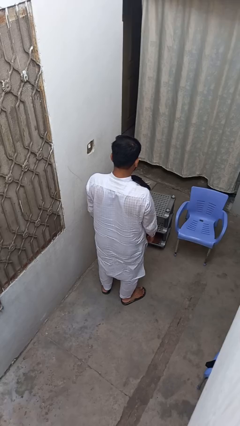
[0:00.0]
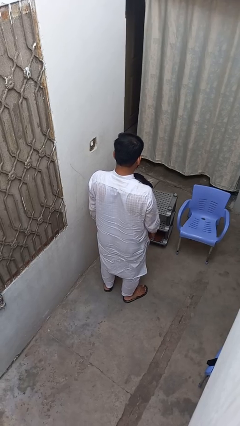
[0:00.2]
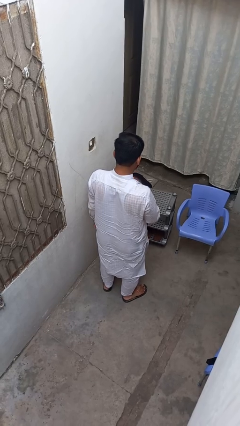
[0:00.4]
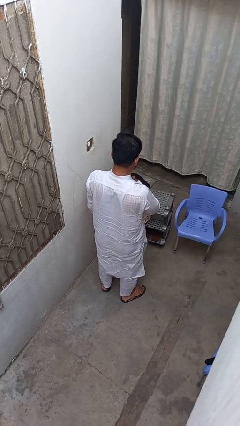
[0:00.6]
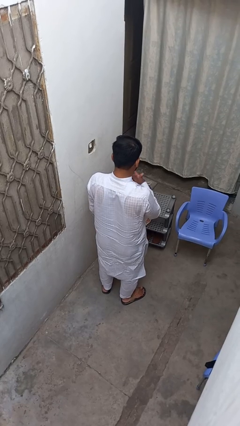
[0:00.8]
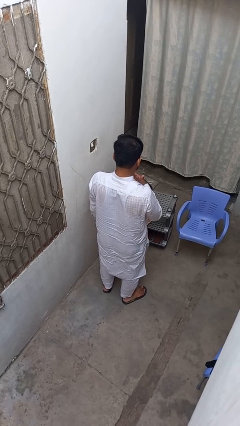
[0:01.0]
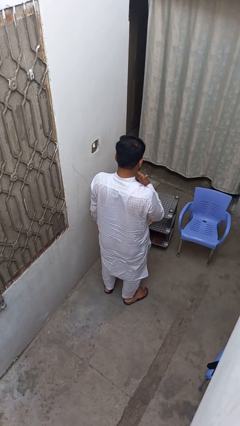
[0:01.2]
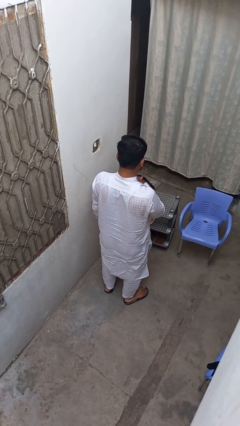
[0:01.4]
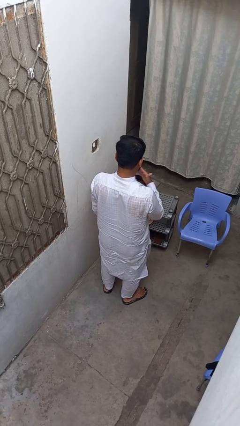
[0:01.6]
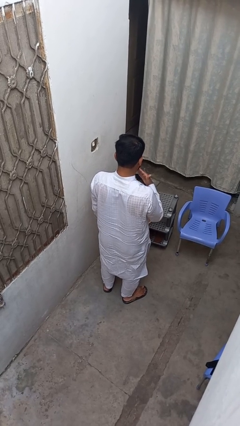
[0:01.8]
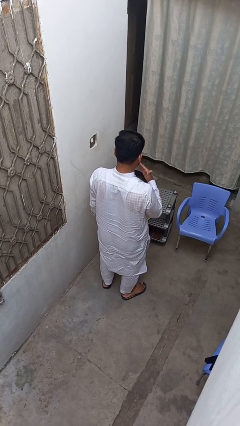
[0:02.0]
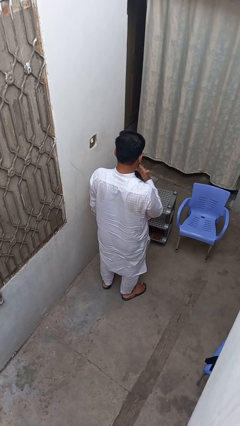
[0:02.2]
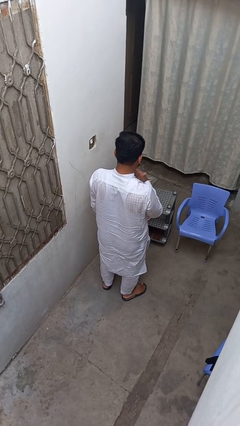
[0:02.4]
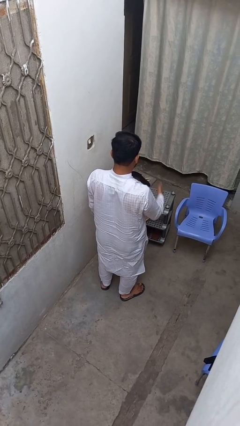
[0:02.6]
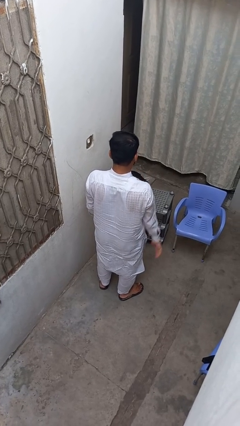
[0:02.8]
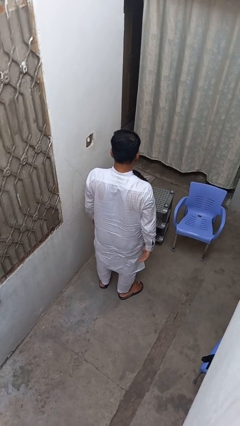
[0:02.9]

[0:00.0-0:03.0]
person drums on chest

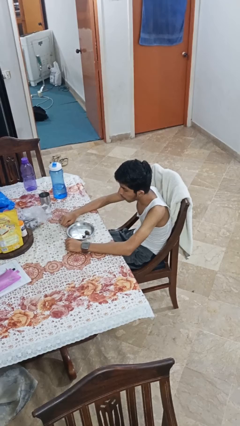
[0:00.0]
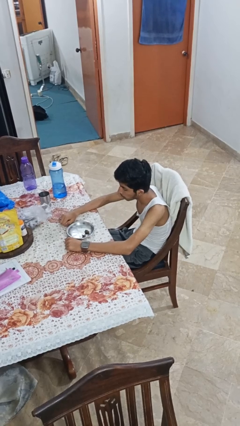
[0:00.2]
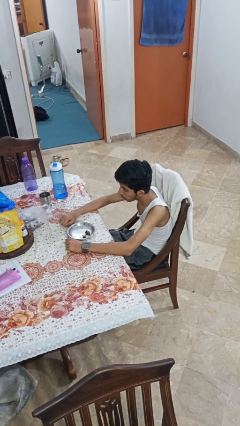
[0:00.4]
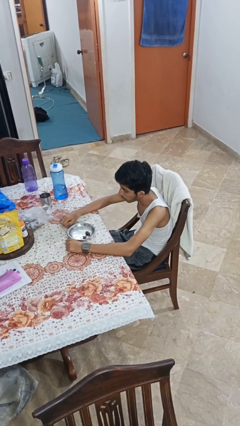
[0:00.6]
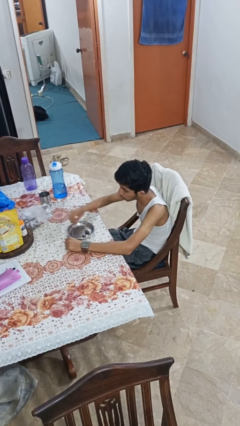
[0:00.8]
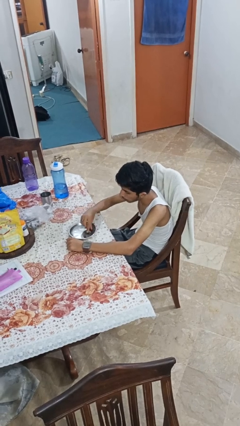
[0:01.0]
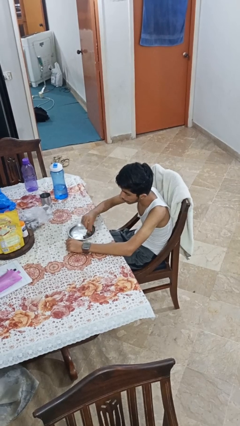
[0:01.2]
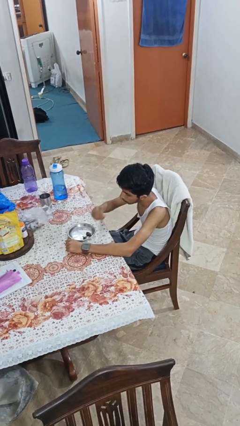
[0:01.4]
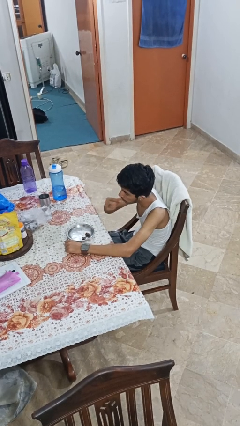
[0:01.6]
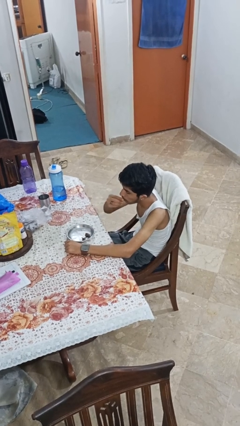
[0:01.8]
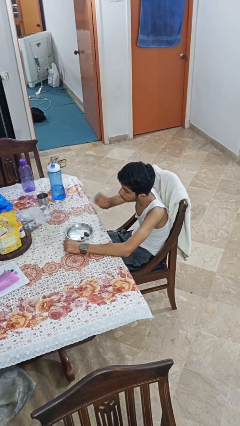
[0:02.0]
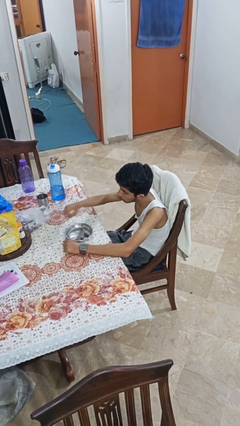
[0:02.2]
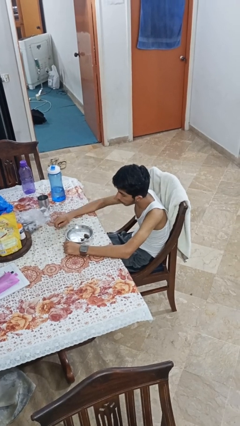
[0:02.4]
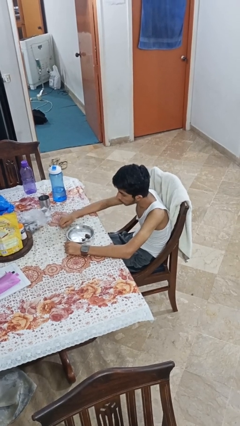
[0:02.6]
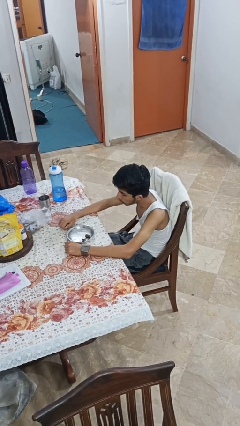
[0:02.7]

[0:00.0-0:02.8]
person eats with hands

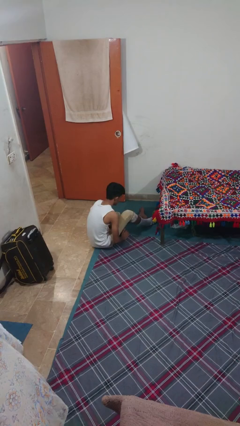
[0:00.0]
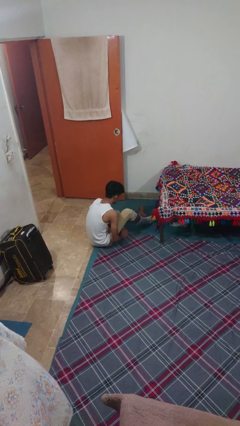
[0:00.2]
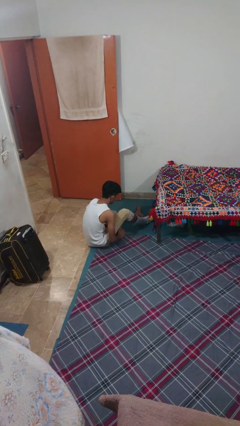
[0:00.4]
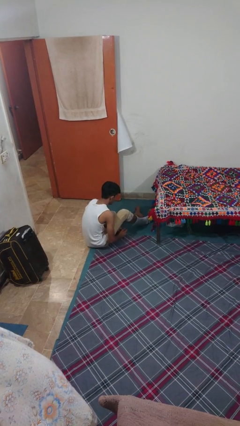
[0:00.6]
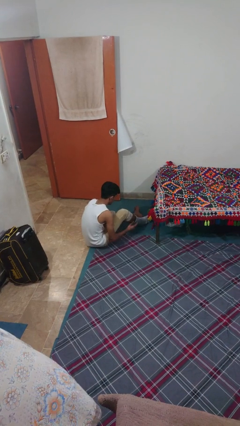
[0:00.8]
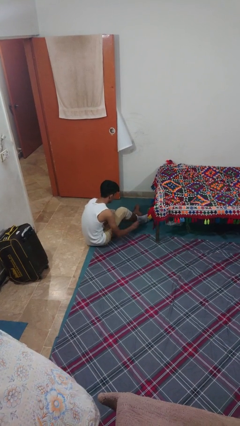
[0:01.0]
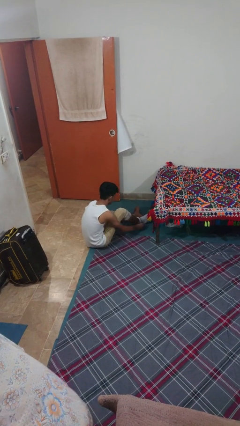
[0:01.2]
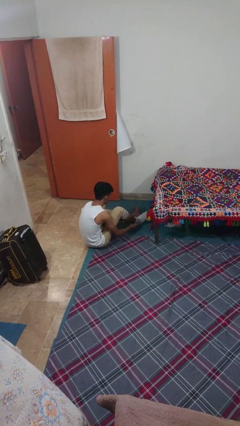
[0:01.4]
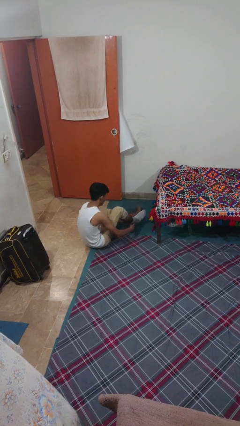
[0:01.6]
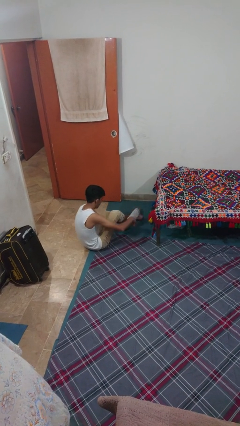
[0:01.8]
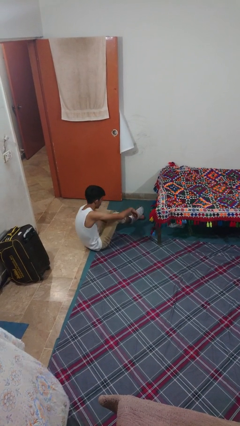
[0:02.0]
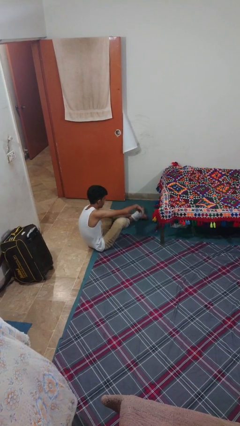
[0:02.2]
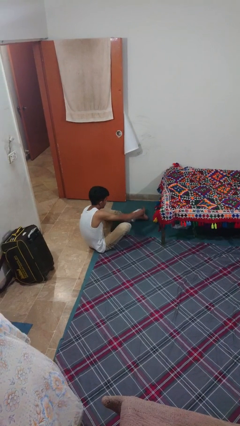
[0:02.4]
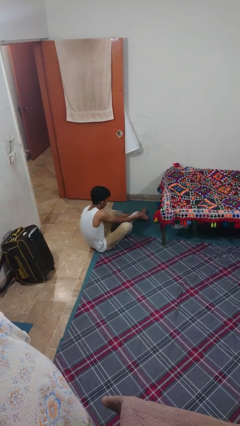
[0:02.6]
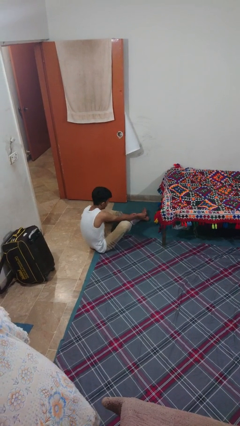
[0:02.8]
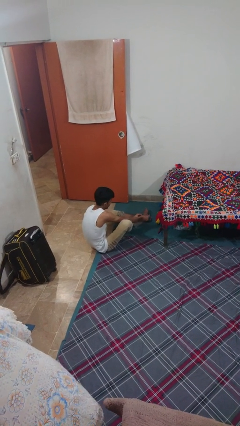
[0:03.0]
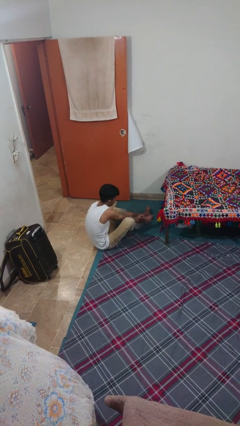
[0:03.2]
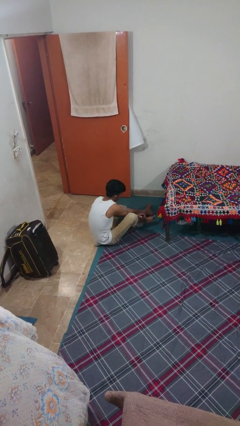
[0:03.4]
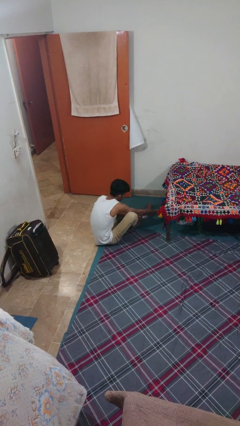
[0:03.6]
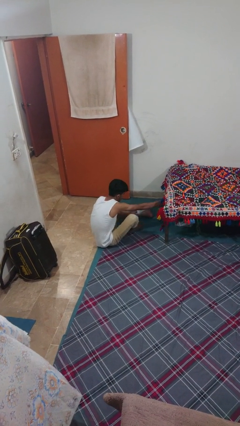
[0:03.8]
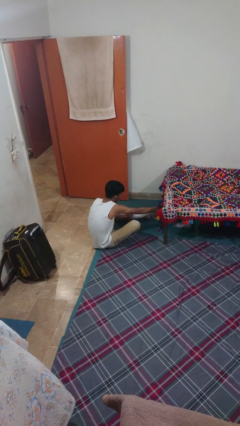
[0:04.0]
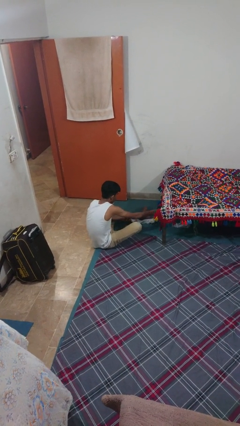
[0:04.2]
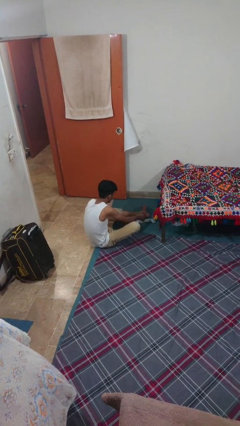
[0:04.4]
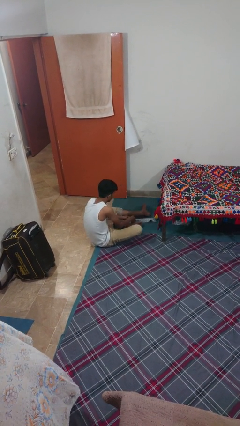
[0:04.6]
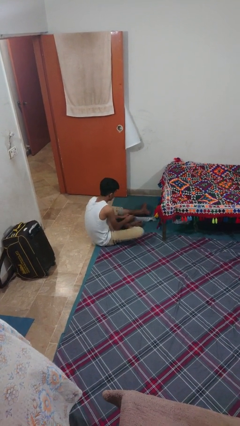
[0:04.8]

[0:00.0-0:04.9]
person takes off socks

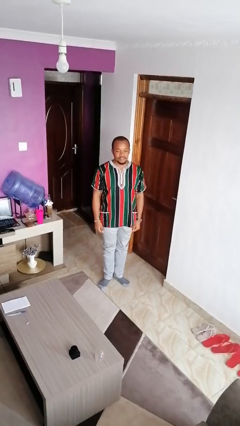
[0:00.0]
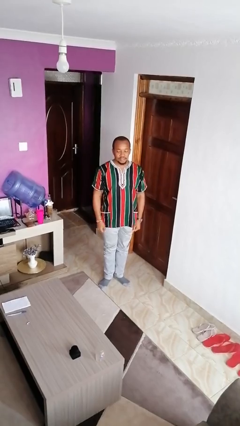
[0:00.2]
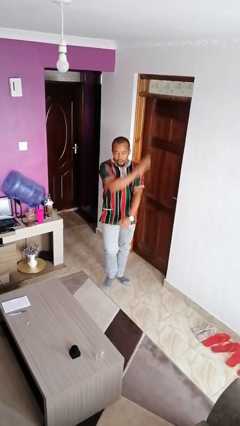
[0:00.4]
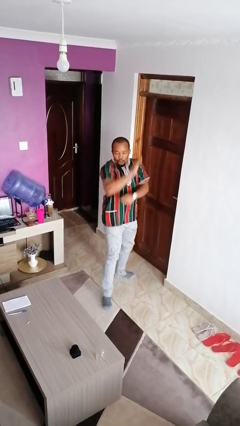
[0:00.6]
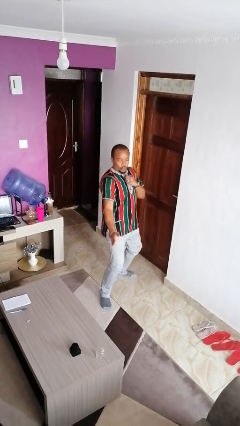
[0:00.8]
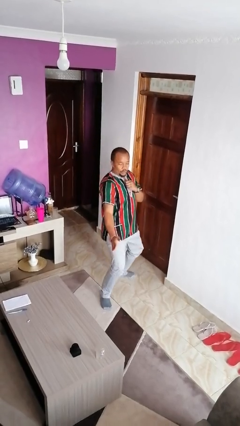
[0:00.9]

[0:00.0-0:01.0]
person karate chop

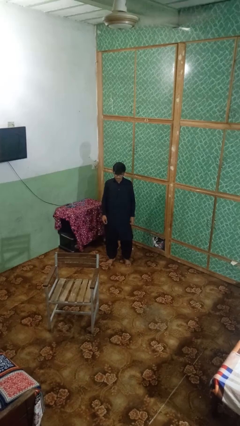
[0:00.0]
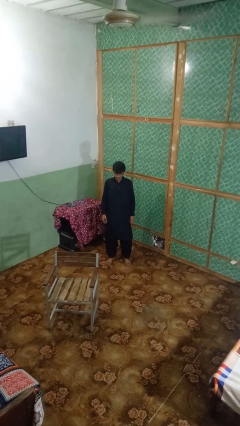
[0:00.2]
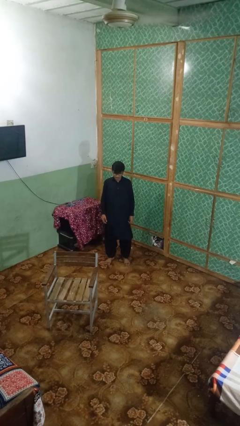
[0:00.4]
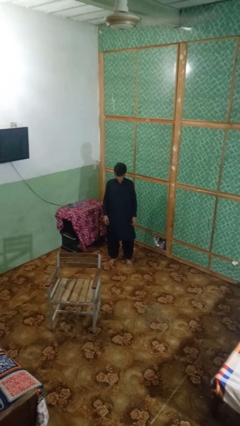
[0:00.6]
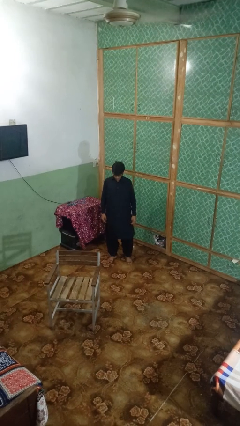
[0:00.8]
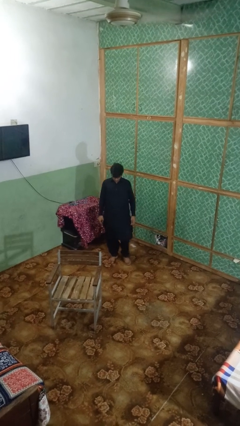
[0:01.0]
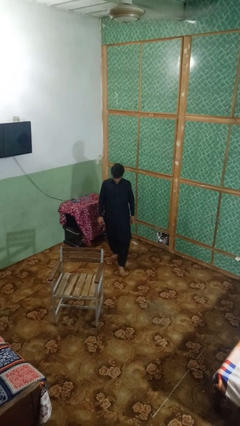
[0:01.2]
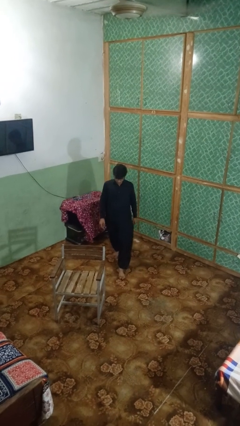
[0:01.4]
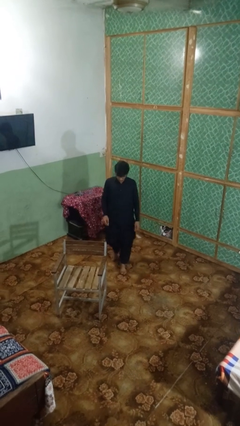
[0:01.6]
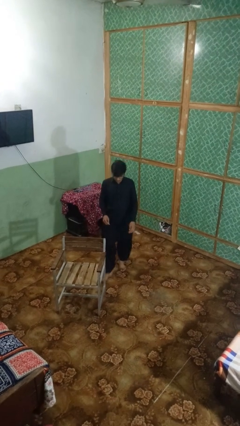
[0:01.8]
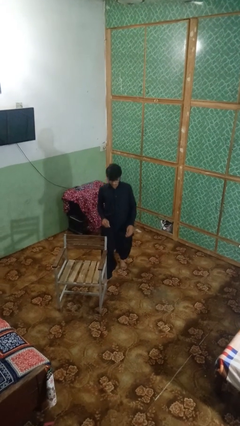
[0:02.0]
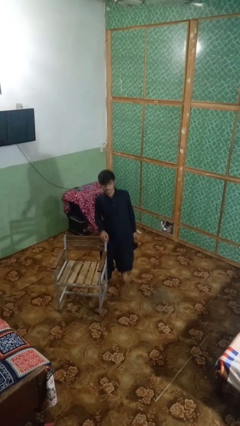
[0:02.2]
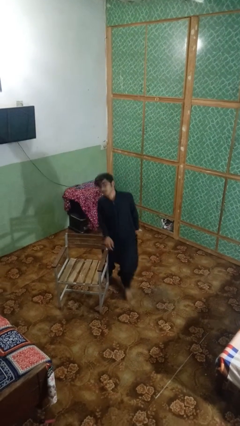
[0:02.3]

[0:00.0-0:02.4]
person trips on object on floor

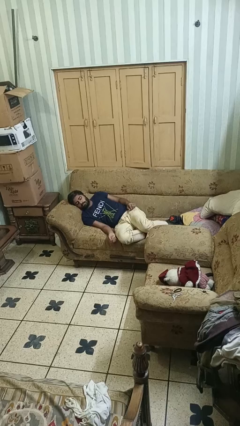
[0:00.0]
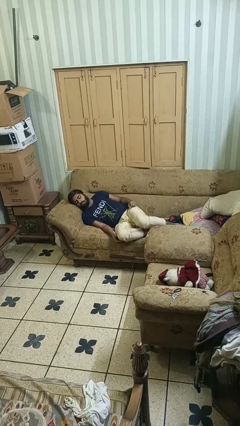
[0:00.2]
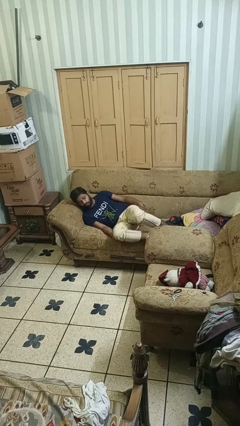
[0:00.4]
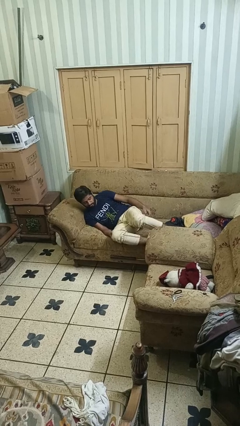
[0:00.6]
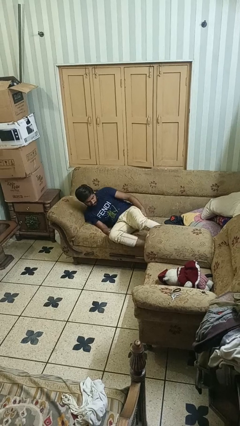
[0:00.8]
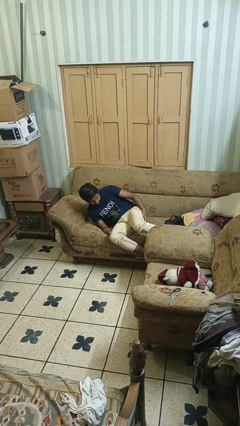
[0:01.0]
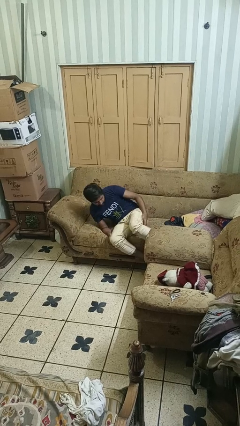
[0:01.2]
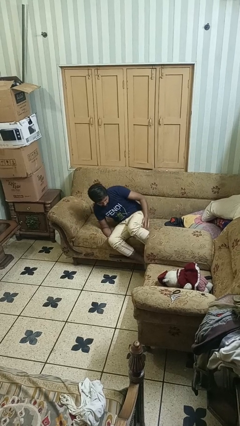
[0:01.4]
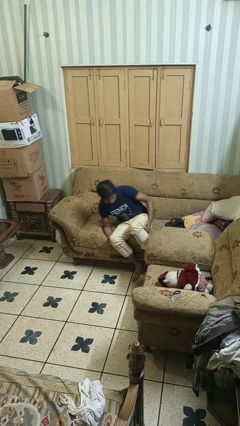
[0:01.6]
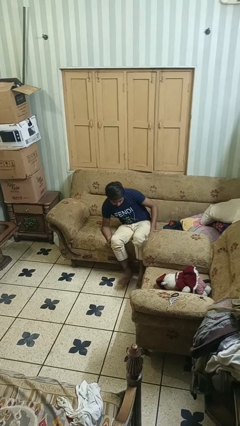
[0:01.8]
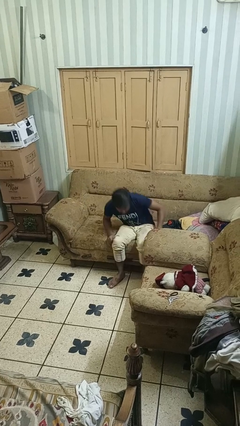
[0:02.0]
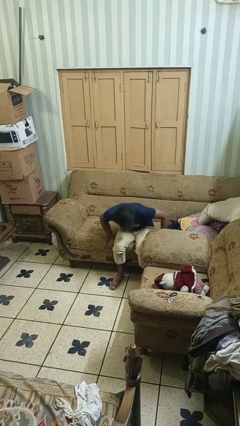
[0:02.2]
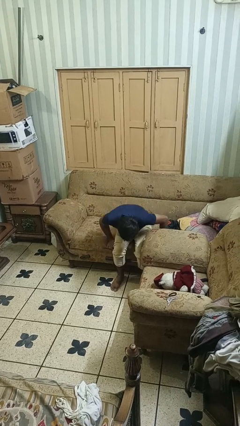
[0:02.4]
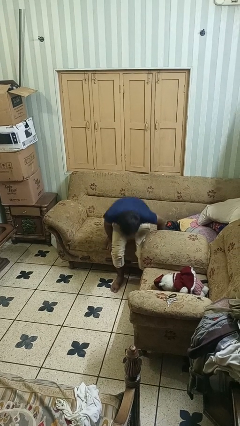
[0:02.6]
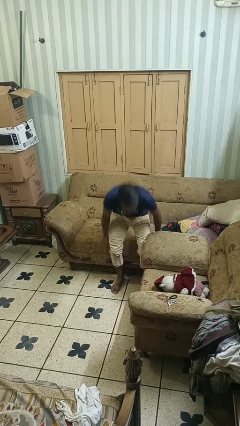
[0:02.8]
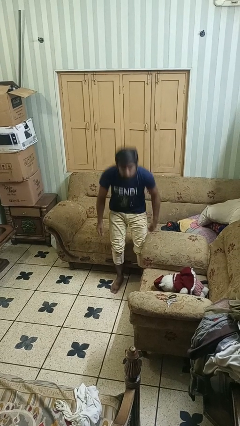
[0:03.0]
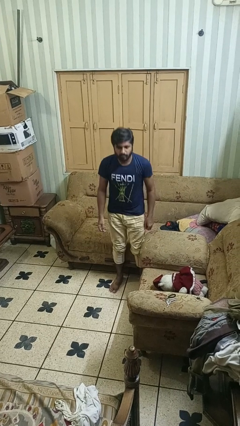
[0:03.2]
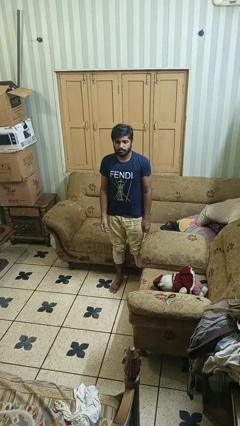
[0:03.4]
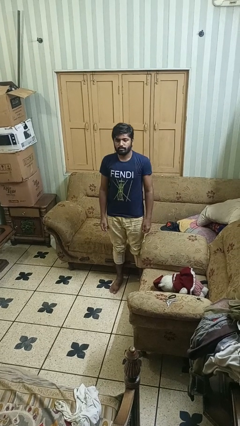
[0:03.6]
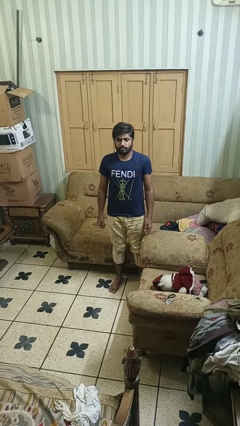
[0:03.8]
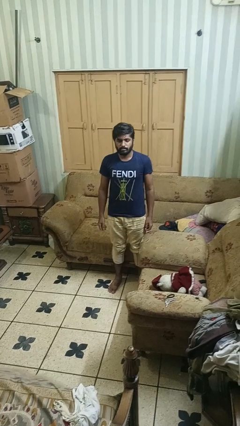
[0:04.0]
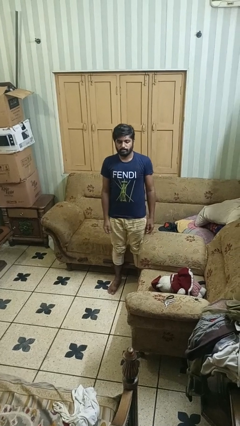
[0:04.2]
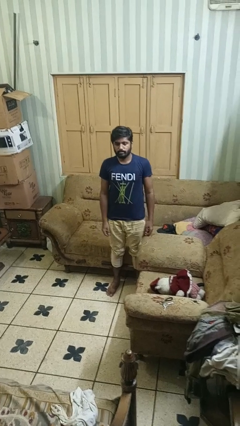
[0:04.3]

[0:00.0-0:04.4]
person stands up
